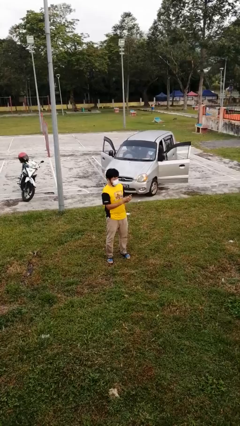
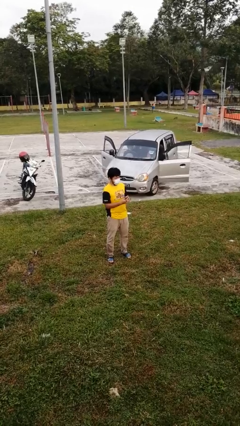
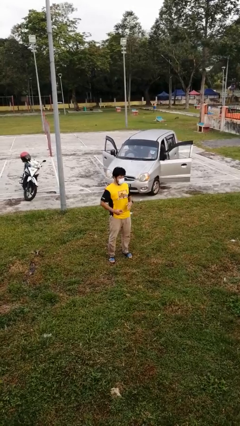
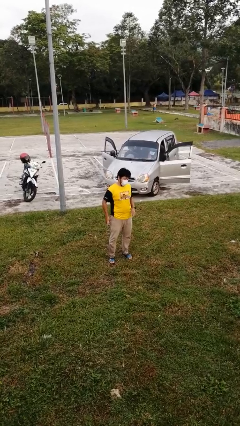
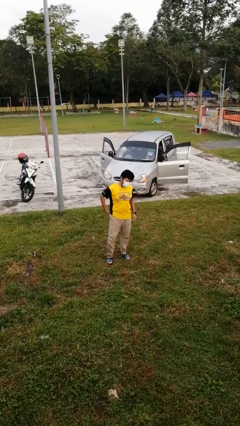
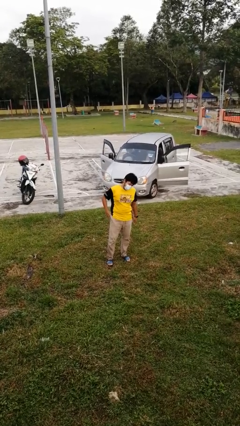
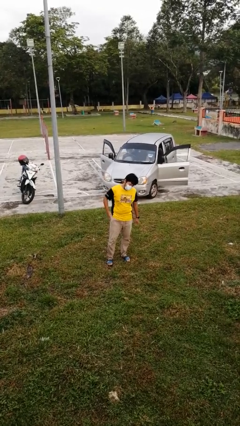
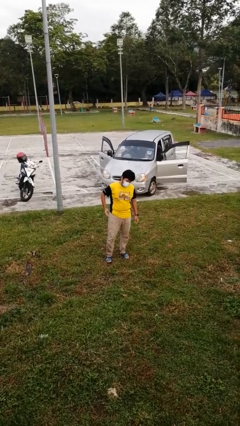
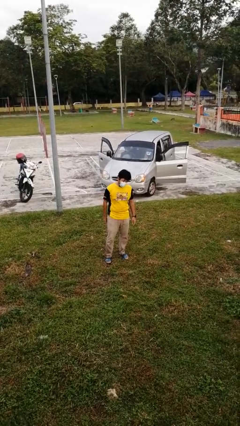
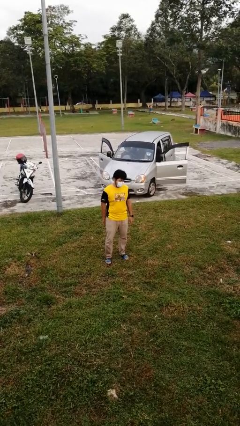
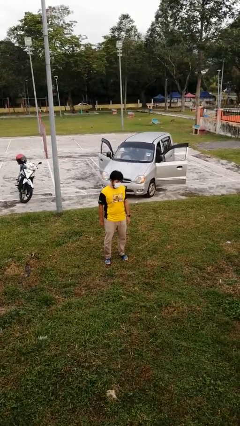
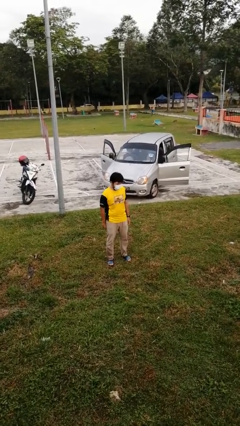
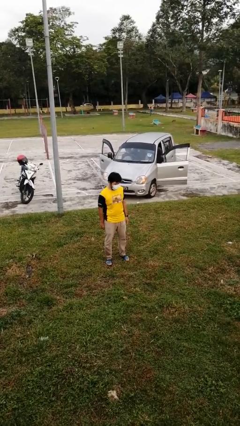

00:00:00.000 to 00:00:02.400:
person puts phone into pocket

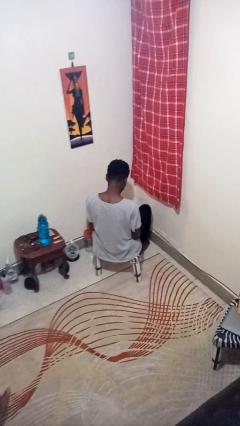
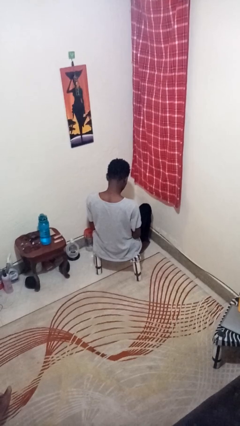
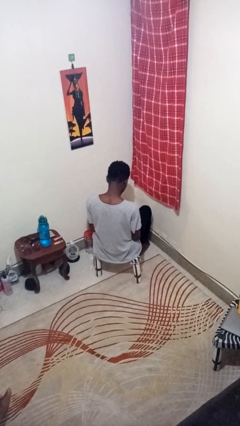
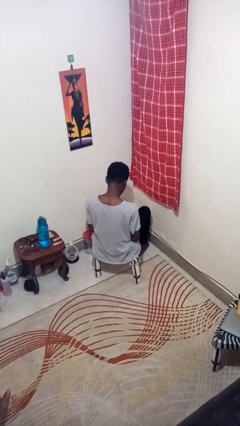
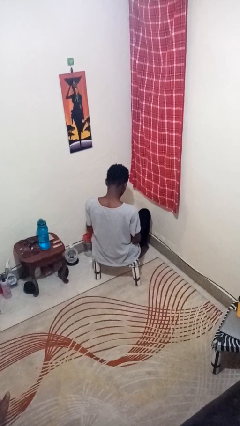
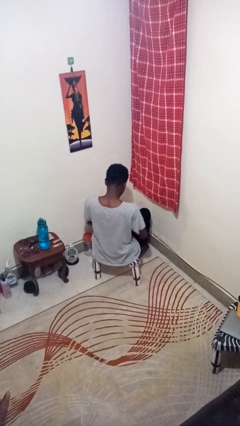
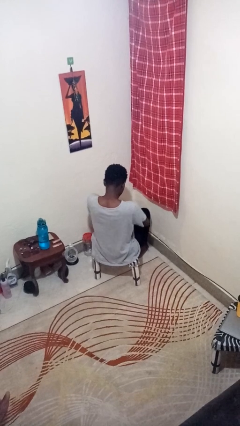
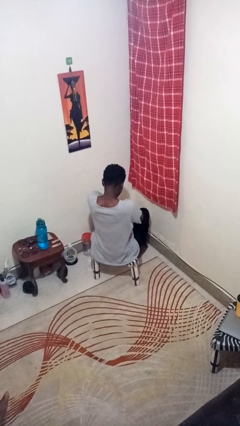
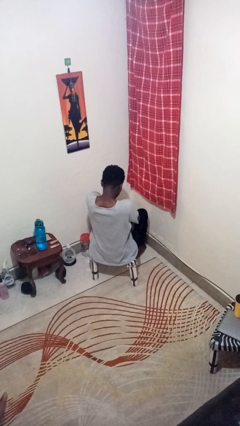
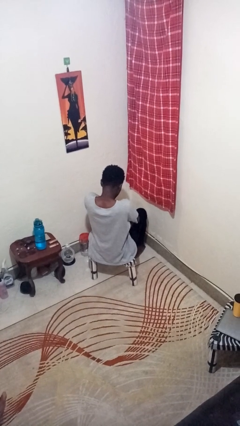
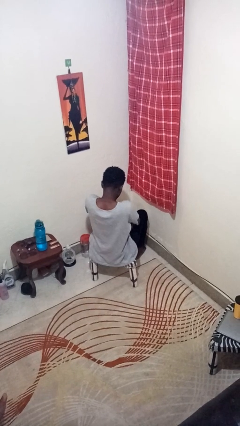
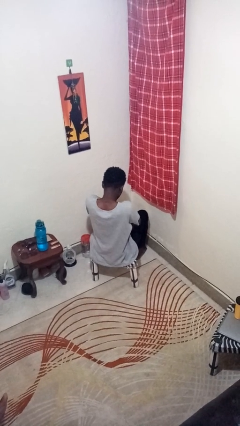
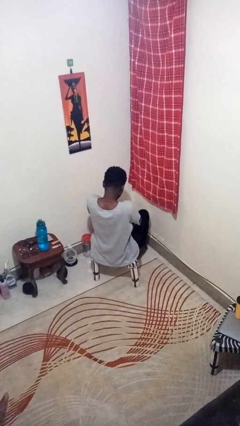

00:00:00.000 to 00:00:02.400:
person crosses arms

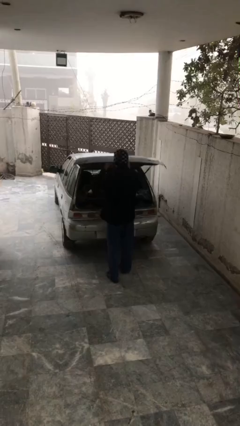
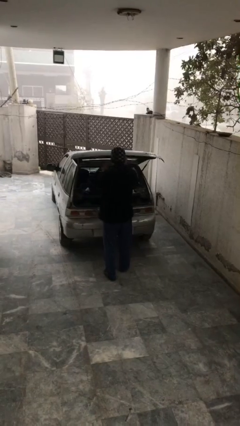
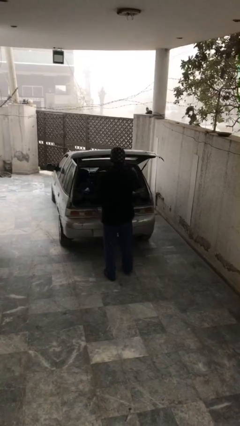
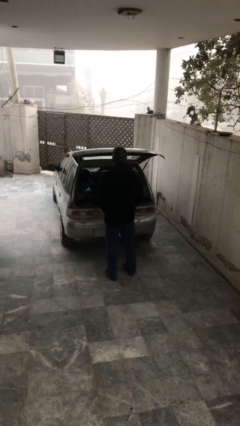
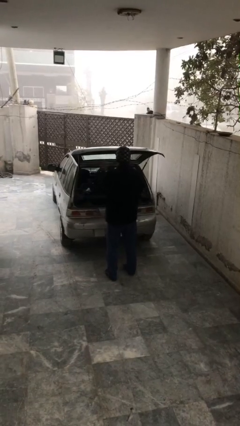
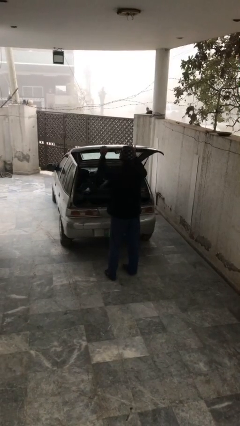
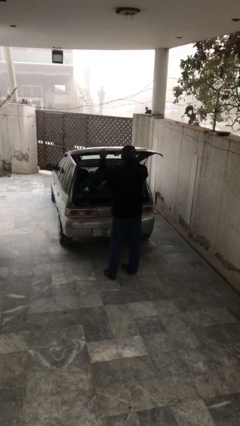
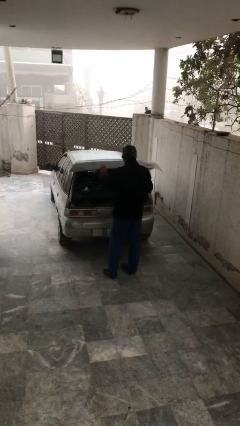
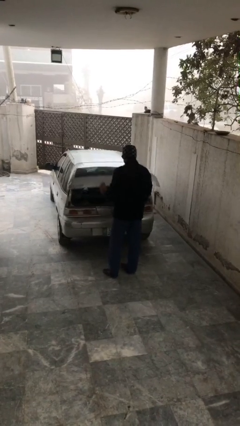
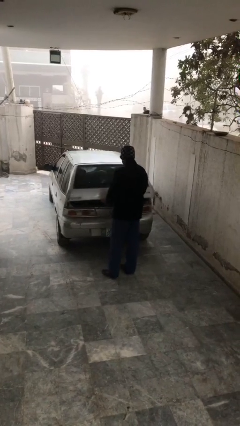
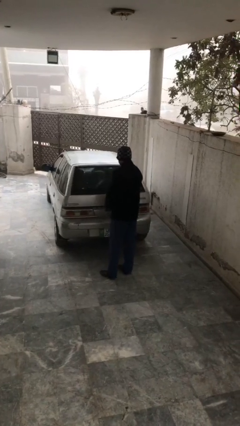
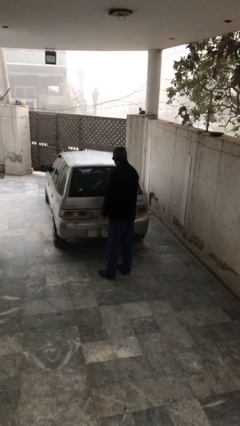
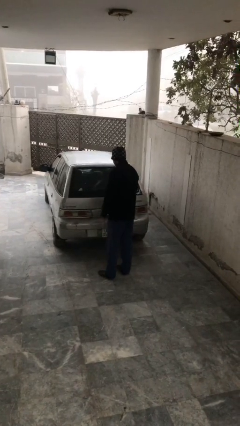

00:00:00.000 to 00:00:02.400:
person closes car trunk

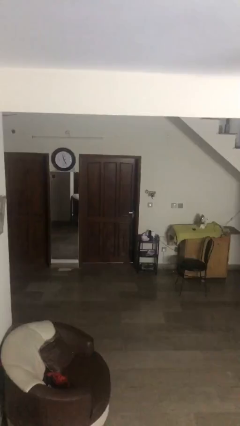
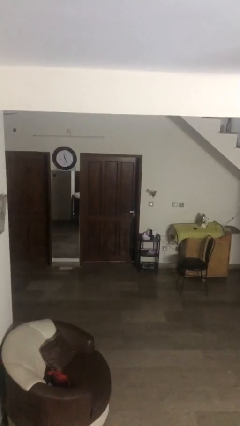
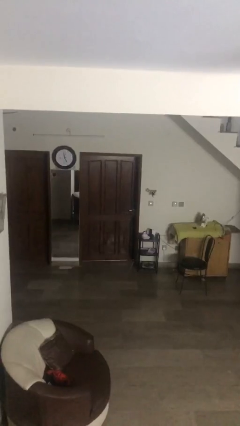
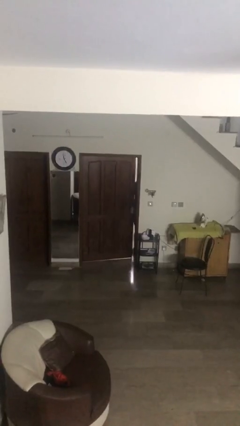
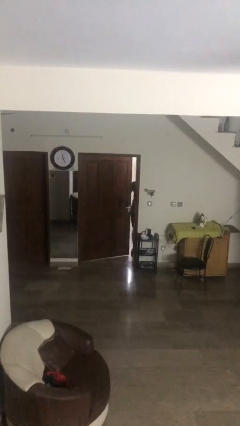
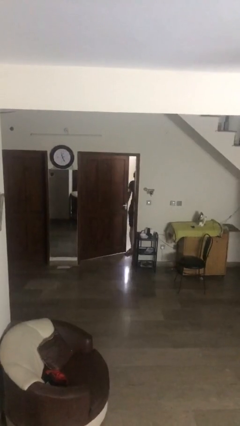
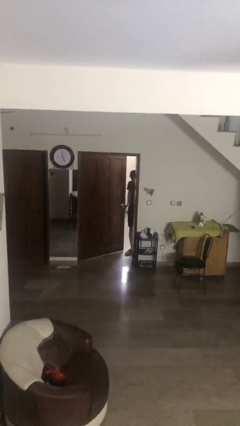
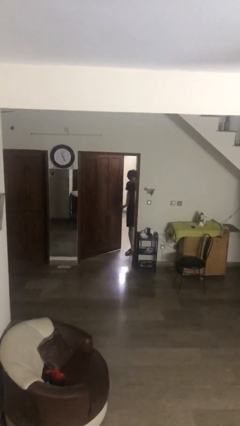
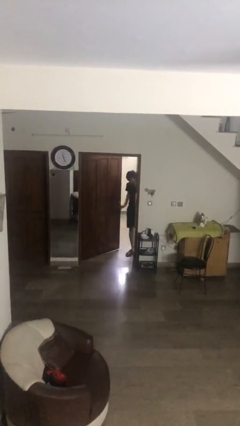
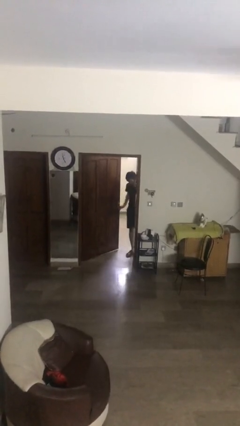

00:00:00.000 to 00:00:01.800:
person opens facility door

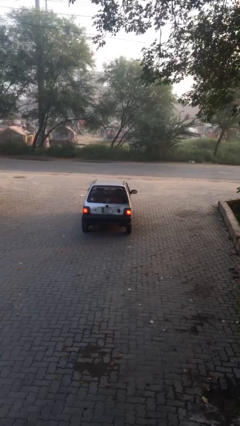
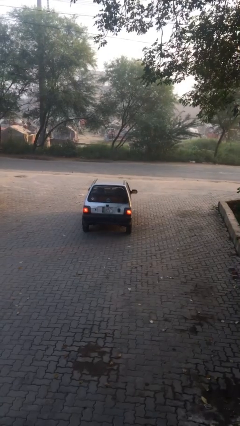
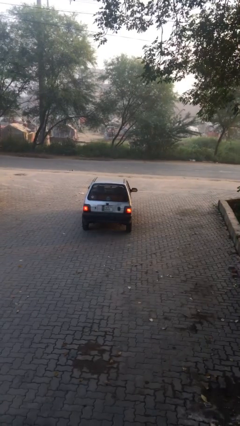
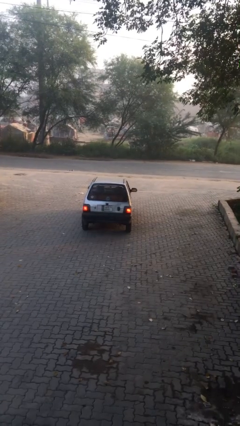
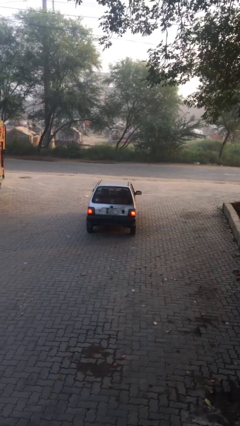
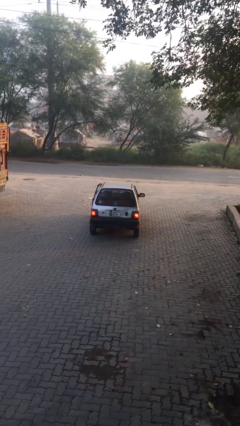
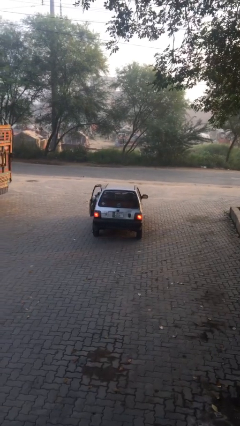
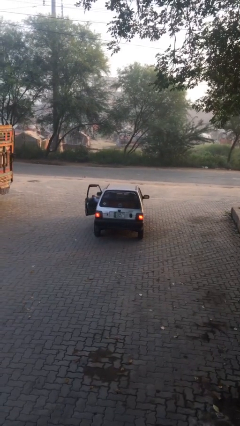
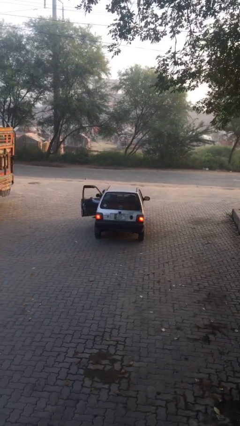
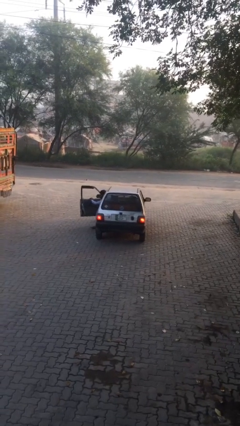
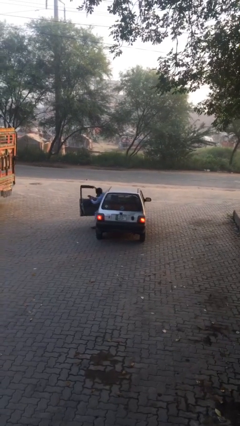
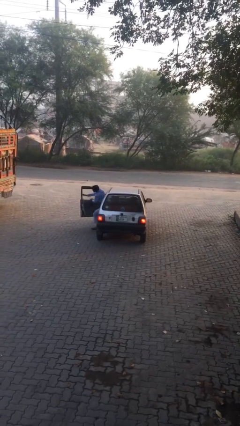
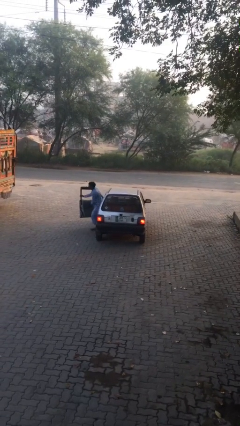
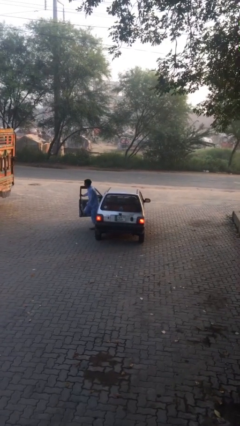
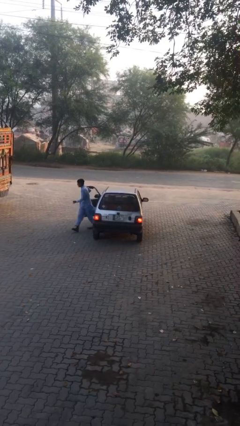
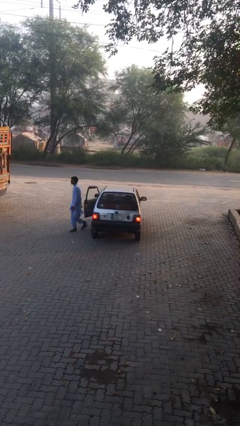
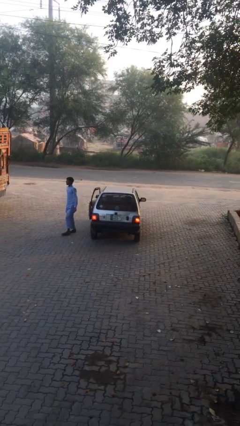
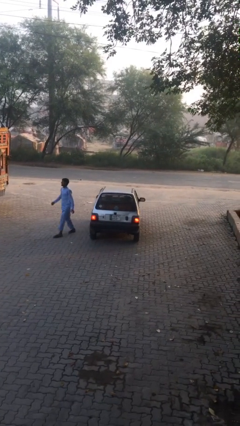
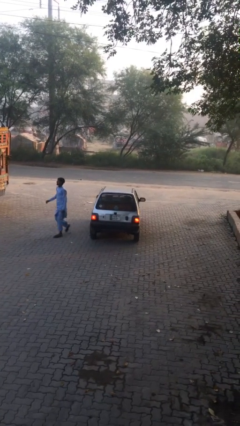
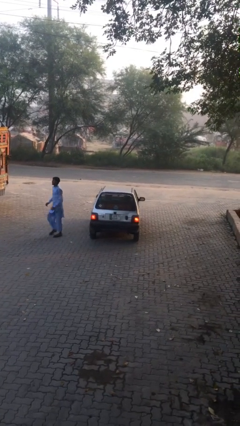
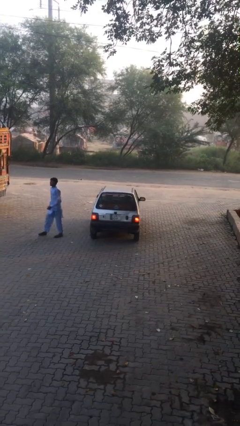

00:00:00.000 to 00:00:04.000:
car drops off person

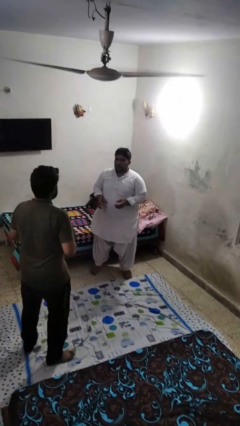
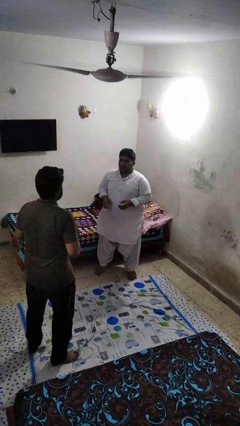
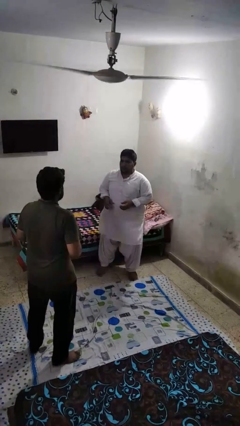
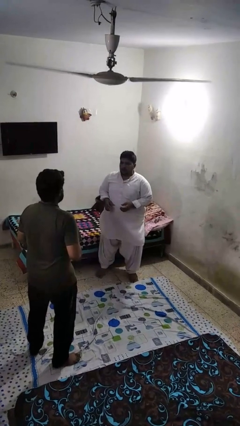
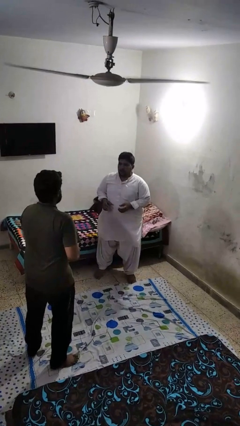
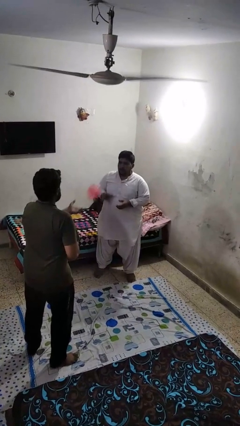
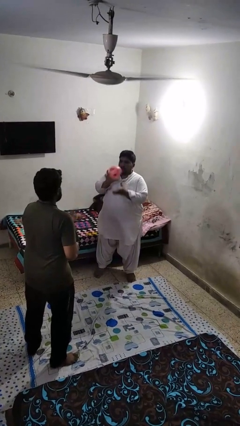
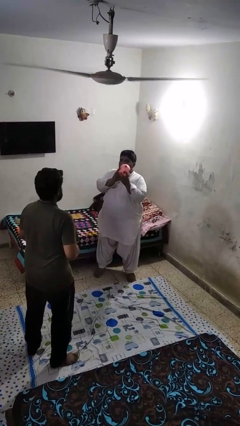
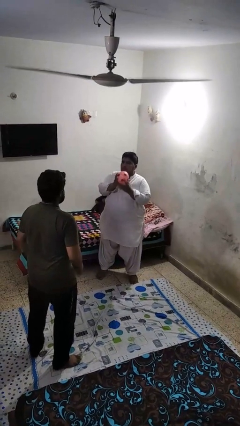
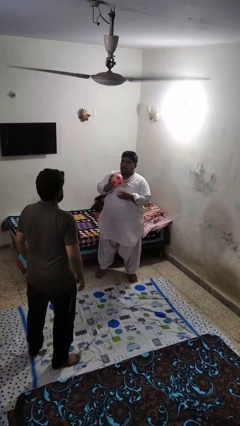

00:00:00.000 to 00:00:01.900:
person catches object from person

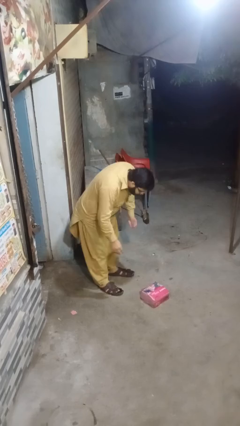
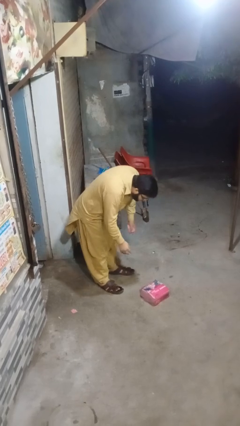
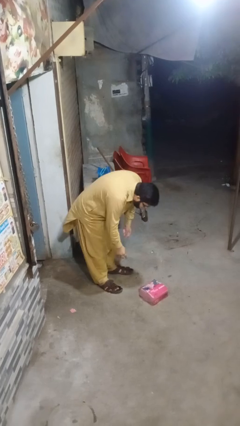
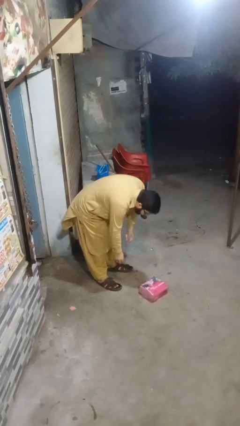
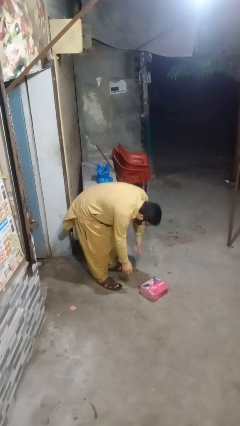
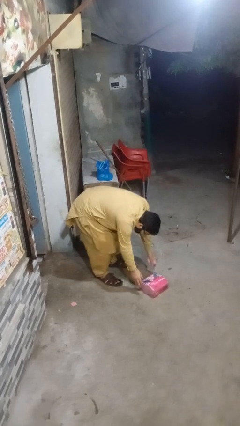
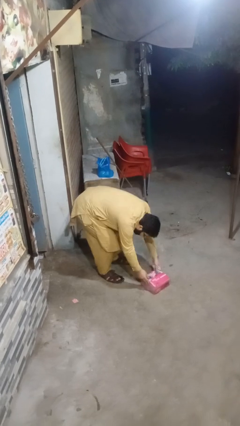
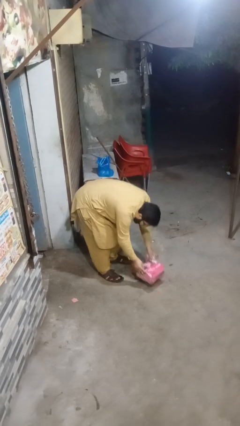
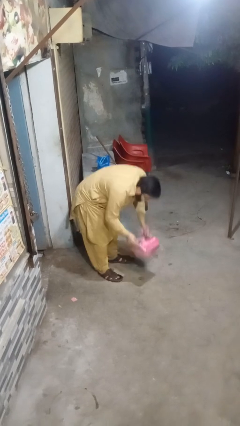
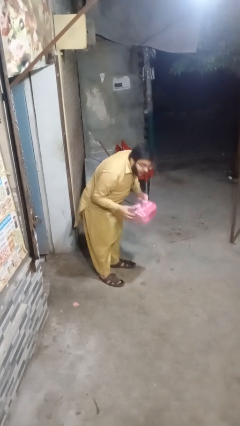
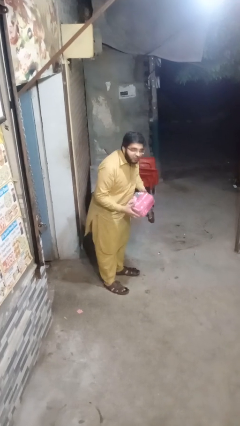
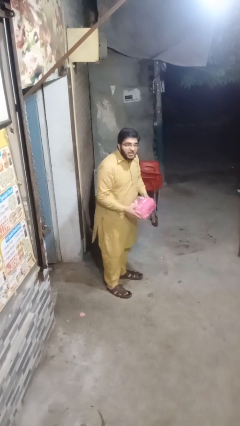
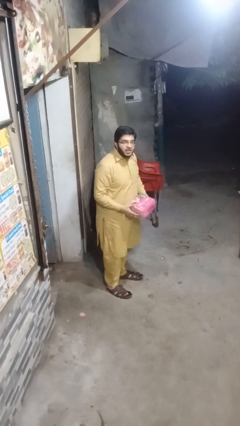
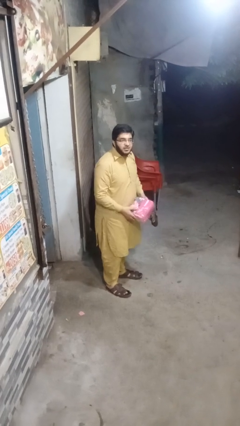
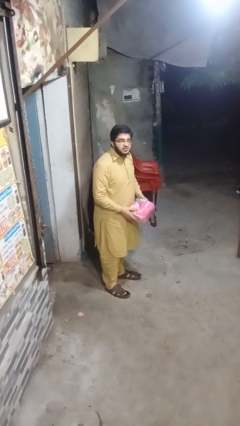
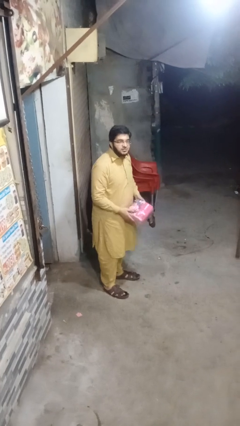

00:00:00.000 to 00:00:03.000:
person picks up object from floor
